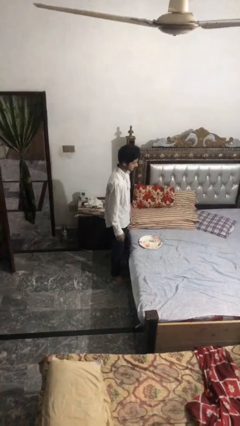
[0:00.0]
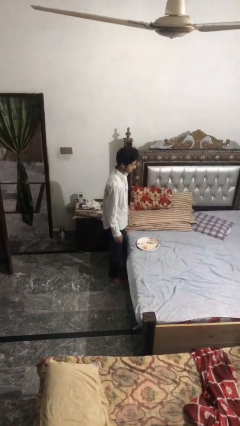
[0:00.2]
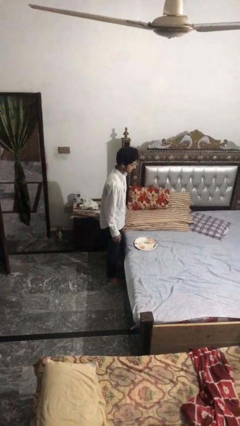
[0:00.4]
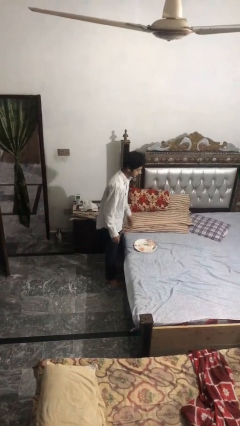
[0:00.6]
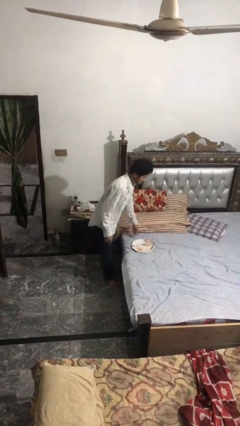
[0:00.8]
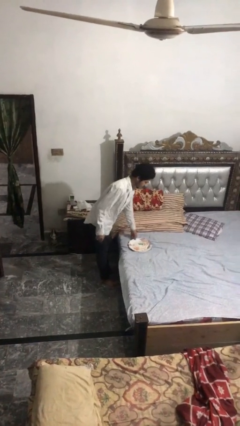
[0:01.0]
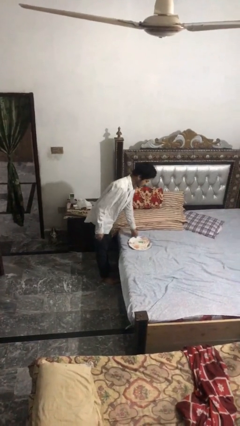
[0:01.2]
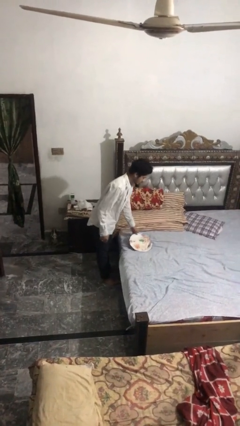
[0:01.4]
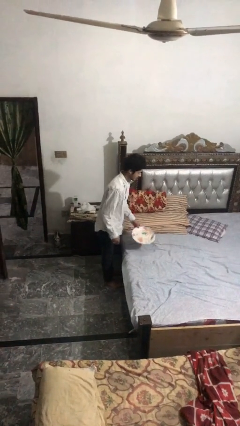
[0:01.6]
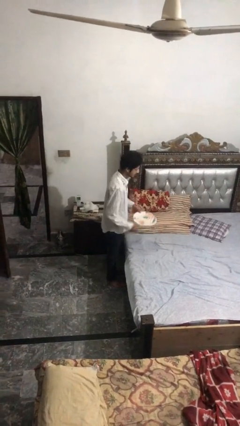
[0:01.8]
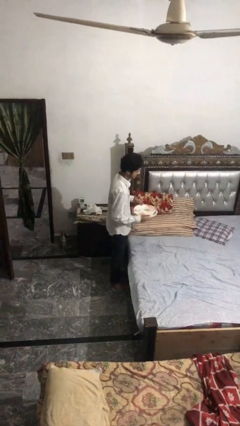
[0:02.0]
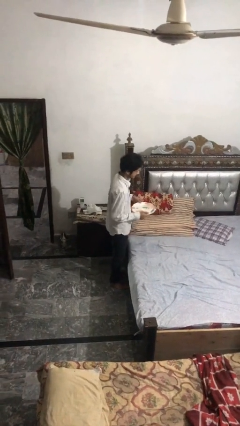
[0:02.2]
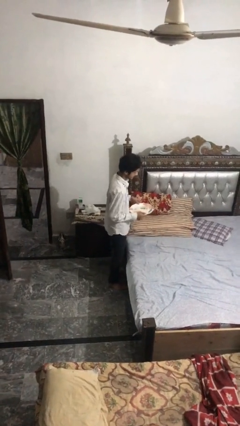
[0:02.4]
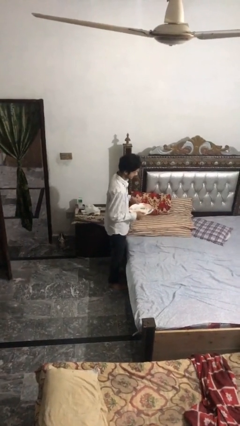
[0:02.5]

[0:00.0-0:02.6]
person picks up object from bed

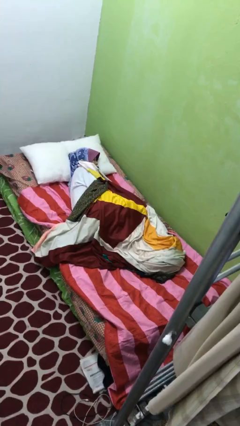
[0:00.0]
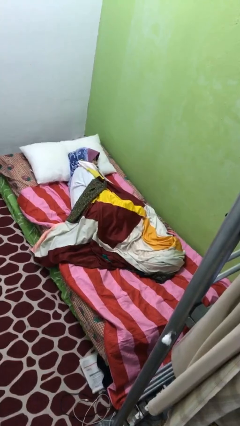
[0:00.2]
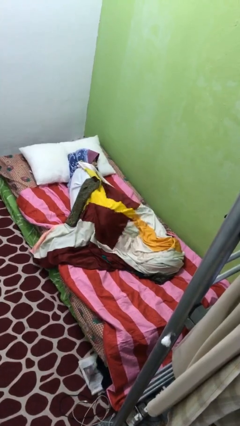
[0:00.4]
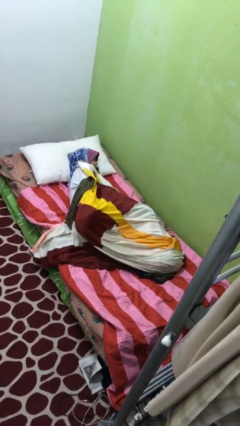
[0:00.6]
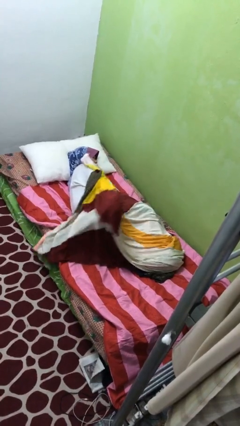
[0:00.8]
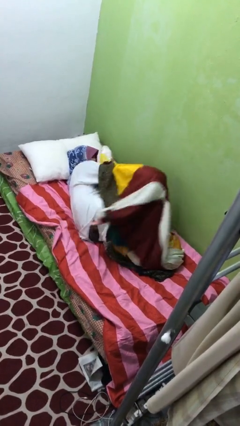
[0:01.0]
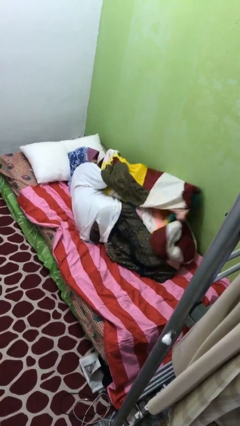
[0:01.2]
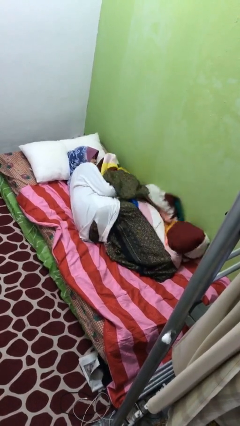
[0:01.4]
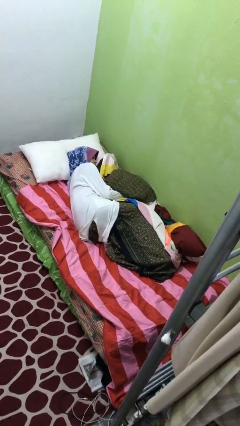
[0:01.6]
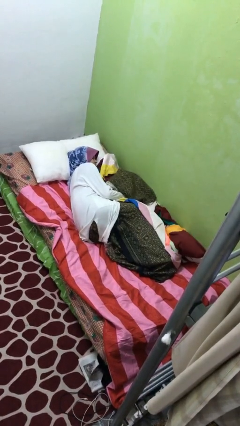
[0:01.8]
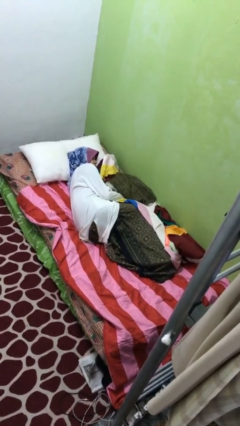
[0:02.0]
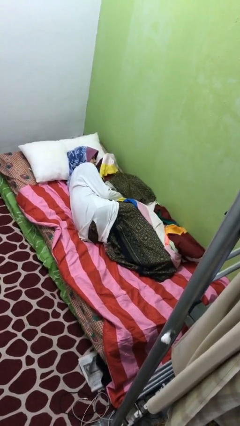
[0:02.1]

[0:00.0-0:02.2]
person uncovers with blanket

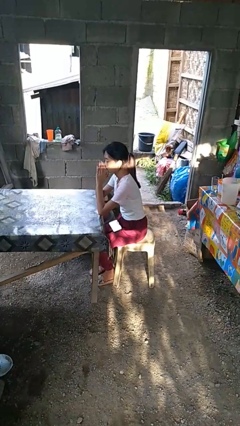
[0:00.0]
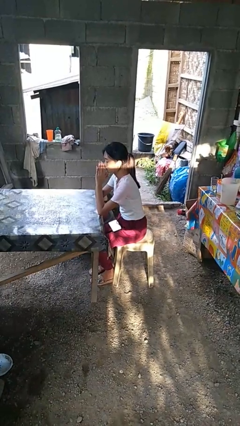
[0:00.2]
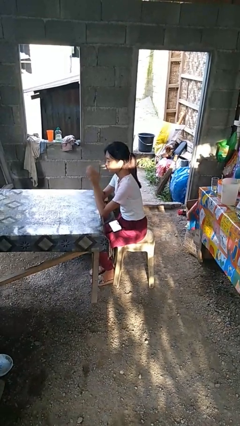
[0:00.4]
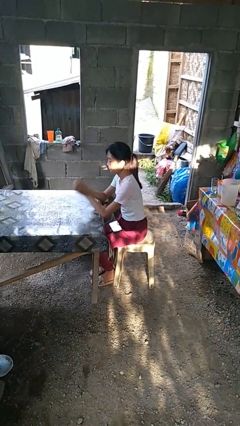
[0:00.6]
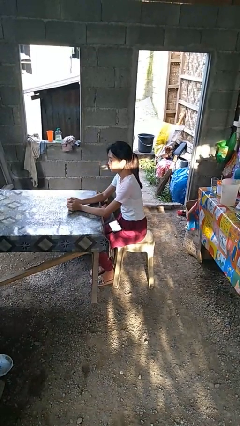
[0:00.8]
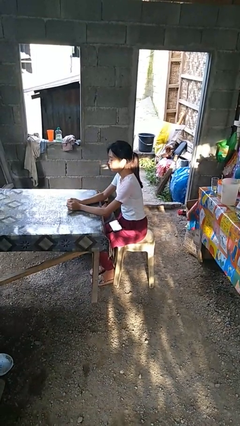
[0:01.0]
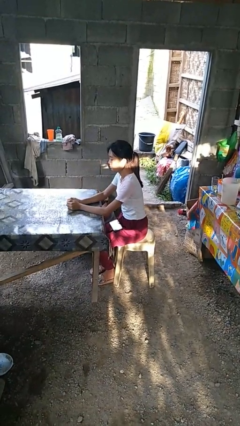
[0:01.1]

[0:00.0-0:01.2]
person prays

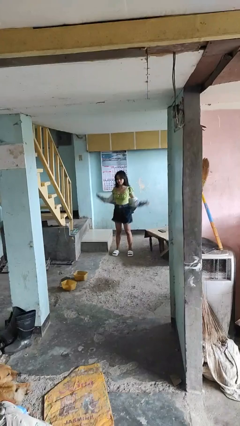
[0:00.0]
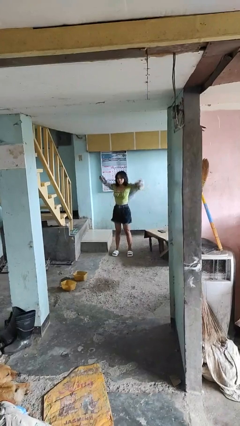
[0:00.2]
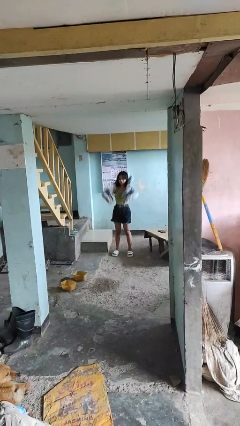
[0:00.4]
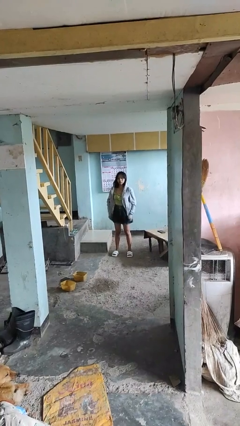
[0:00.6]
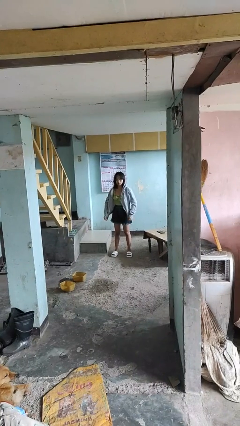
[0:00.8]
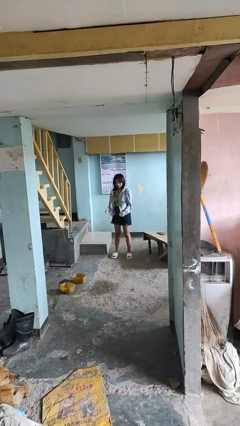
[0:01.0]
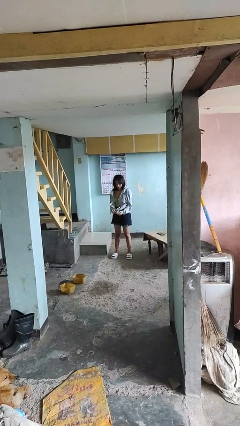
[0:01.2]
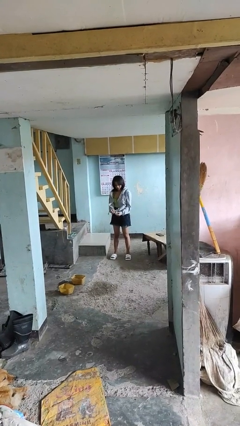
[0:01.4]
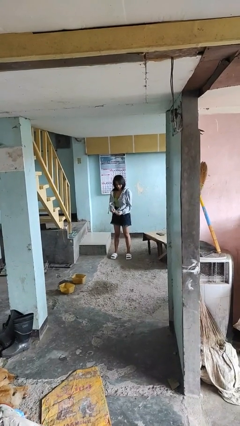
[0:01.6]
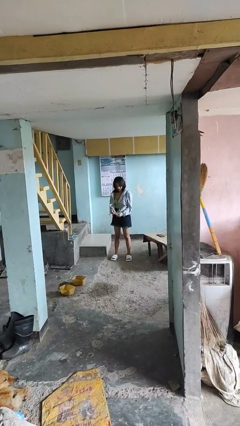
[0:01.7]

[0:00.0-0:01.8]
person puts on jacket

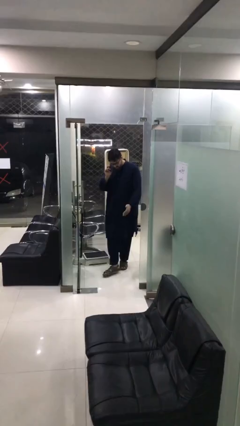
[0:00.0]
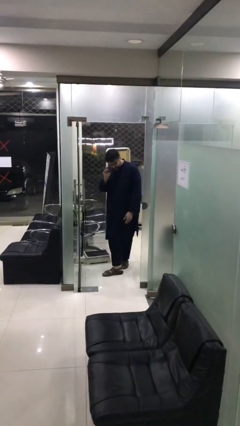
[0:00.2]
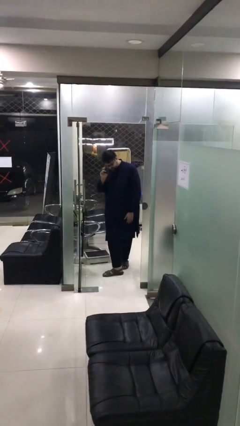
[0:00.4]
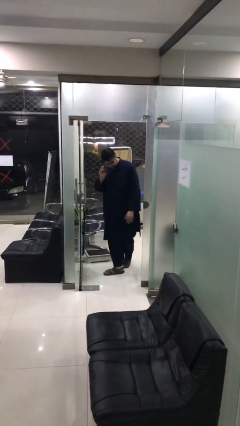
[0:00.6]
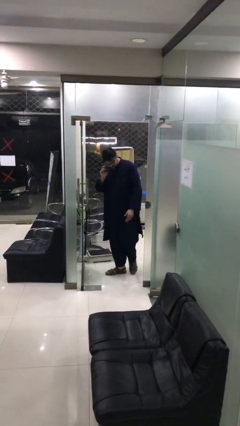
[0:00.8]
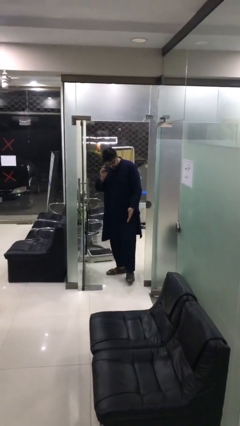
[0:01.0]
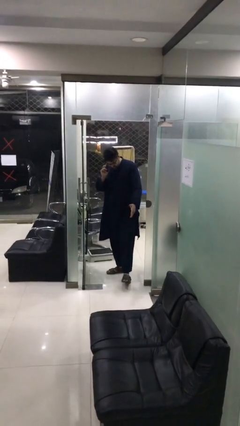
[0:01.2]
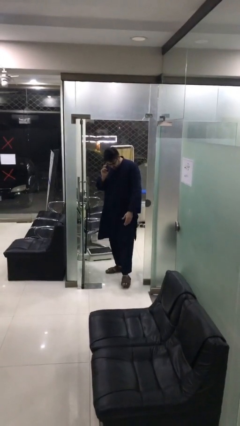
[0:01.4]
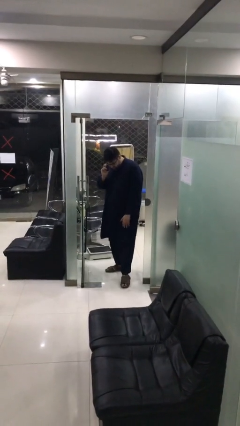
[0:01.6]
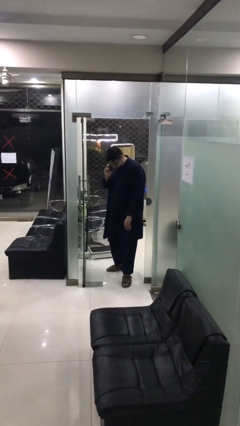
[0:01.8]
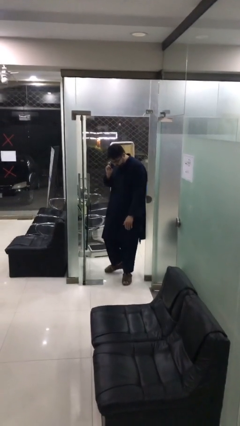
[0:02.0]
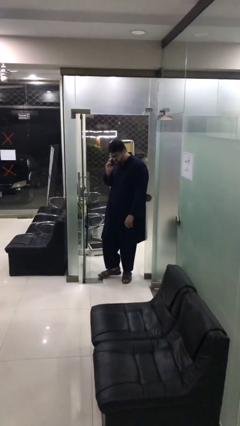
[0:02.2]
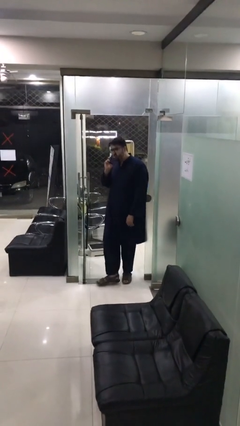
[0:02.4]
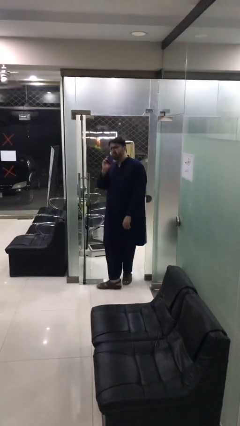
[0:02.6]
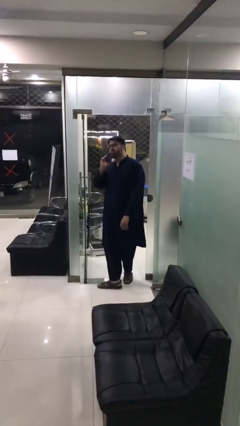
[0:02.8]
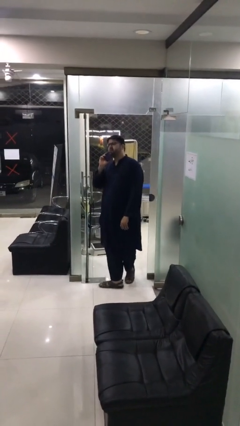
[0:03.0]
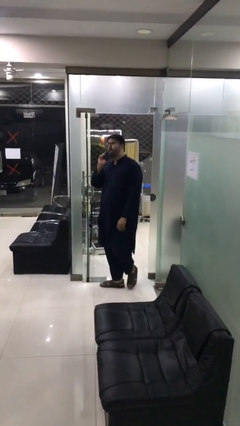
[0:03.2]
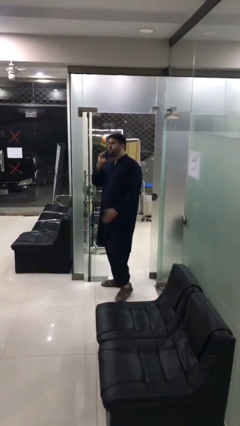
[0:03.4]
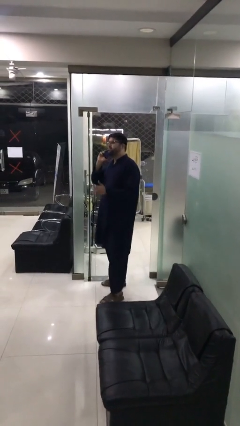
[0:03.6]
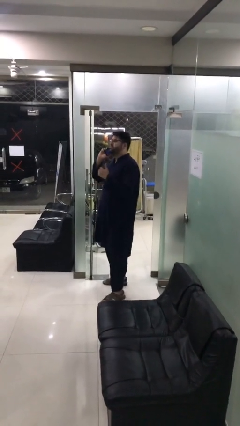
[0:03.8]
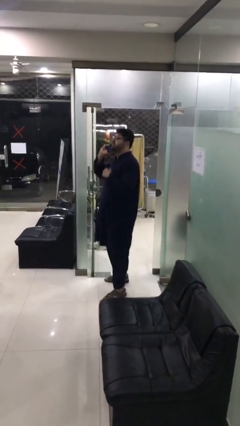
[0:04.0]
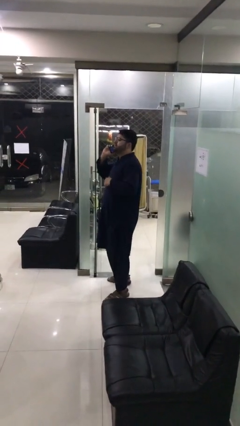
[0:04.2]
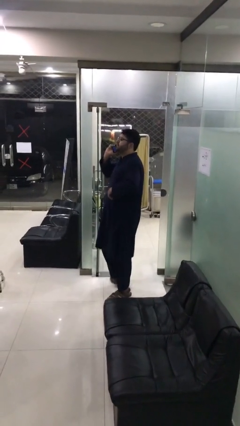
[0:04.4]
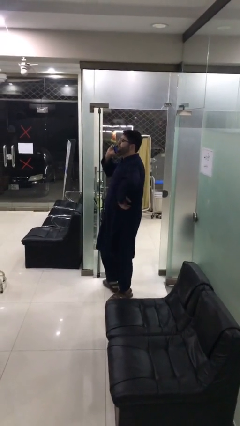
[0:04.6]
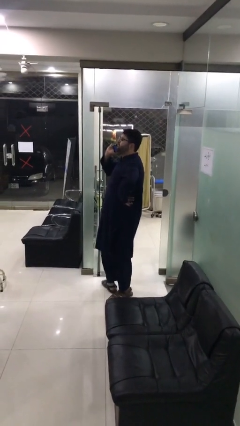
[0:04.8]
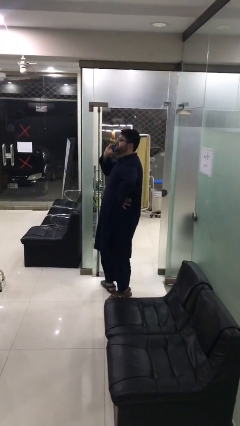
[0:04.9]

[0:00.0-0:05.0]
person enters scene through structure

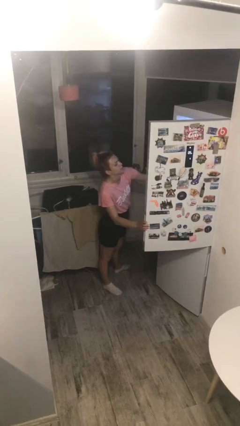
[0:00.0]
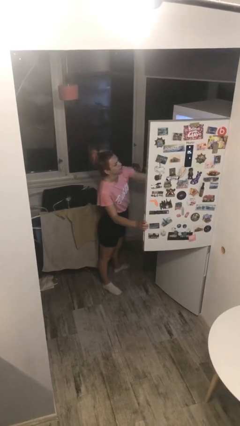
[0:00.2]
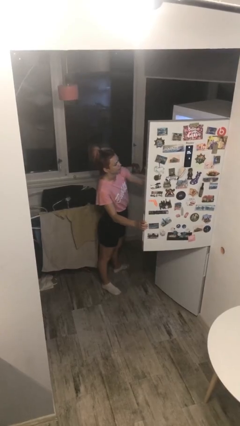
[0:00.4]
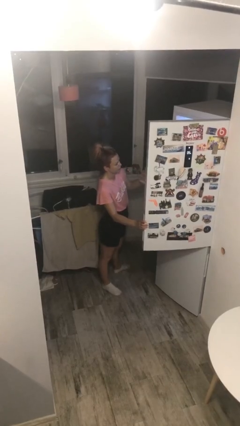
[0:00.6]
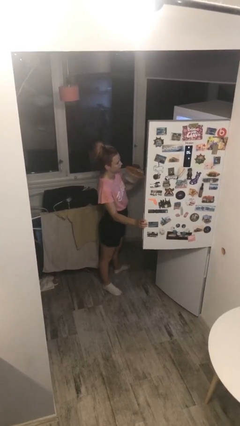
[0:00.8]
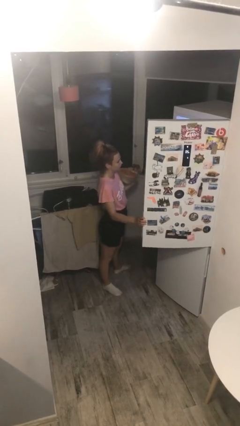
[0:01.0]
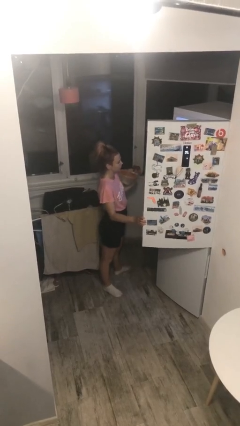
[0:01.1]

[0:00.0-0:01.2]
person takes object from refrigerator

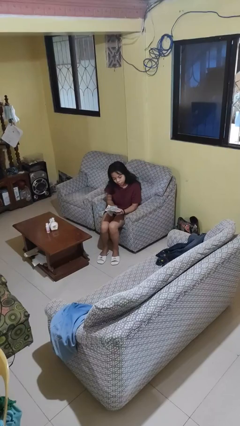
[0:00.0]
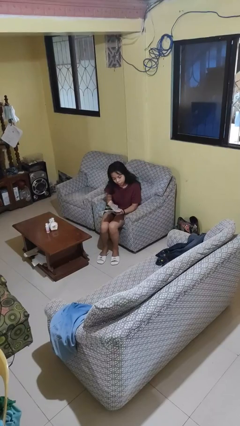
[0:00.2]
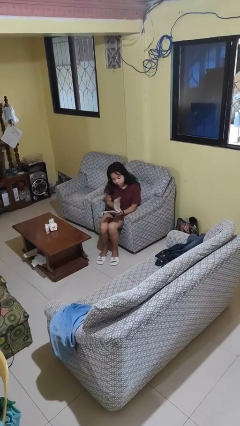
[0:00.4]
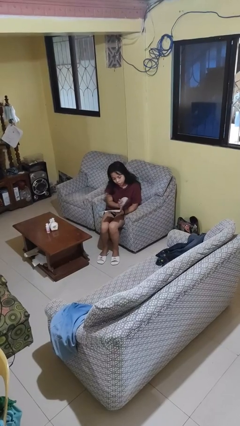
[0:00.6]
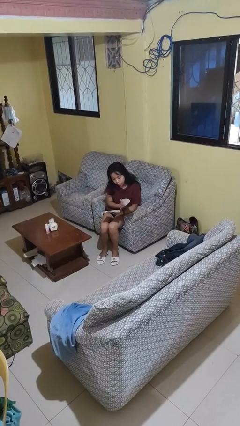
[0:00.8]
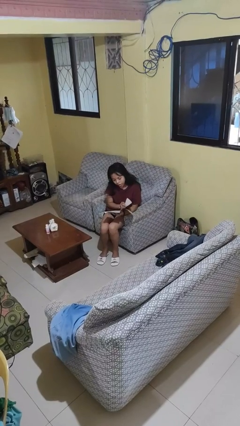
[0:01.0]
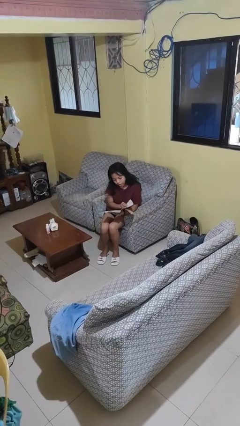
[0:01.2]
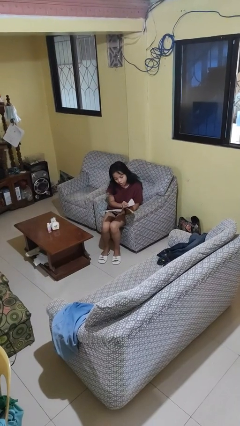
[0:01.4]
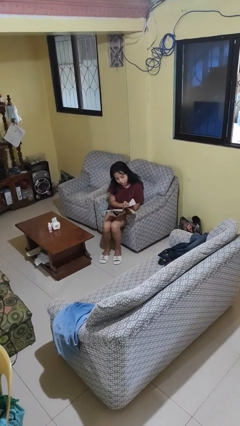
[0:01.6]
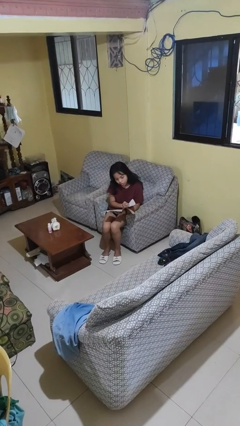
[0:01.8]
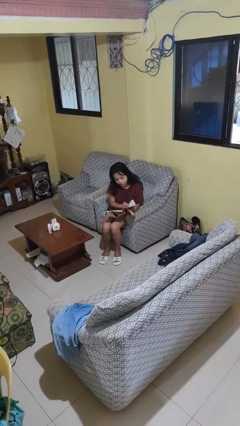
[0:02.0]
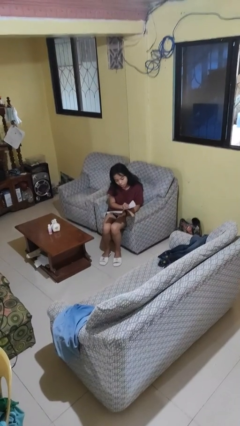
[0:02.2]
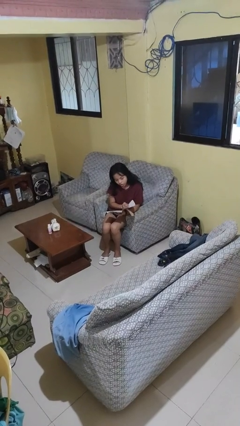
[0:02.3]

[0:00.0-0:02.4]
person reads magazine

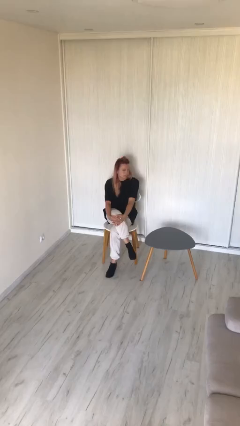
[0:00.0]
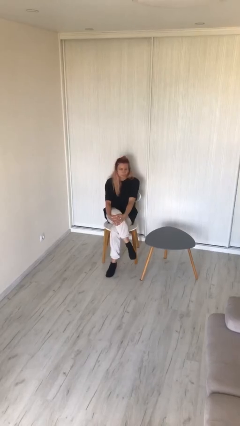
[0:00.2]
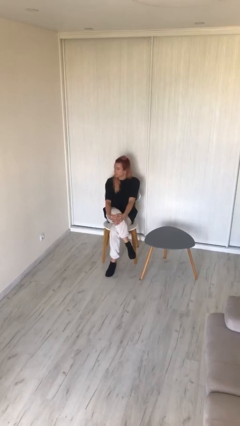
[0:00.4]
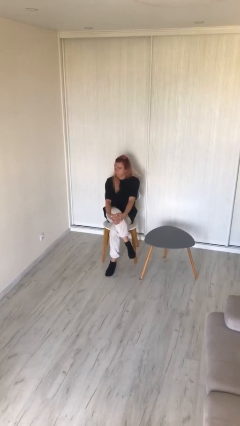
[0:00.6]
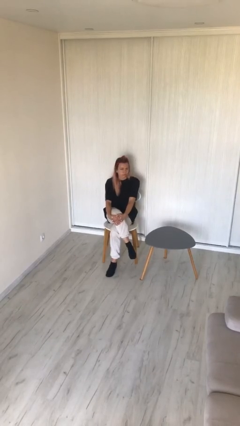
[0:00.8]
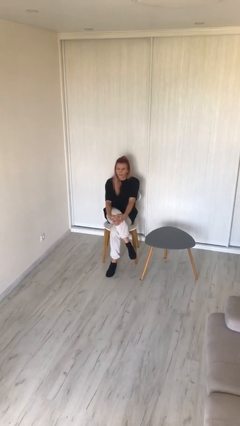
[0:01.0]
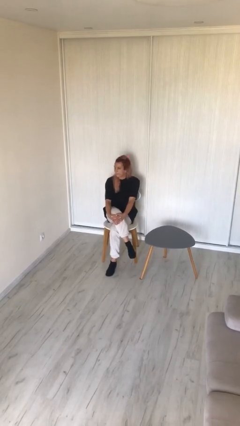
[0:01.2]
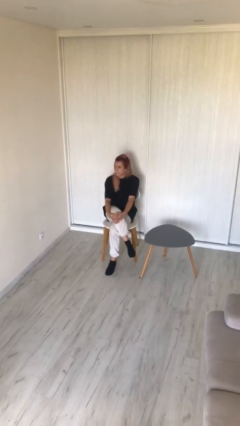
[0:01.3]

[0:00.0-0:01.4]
person shakes head
